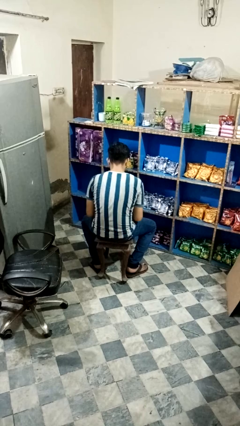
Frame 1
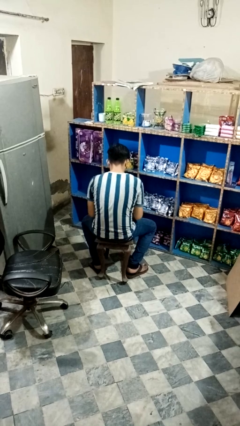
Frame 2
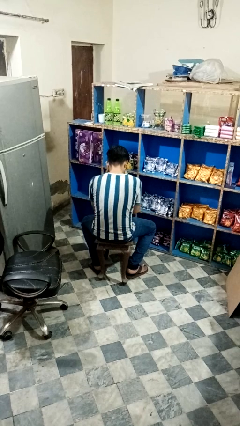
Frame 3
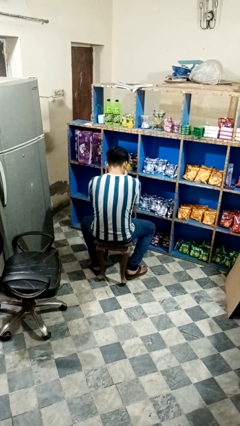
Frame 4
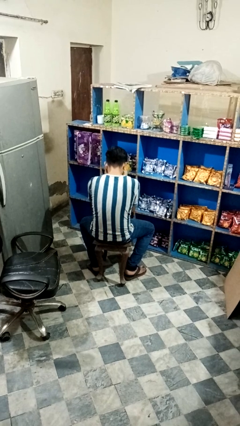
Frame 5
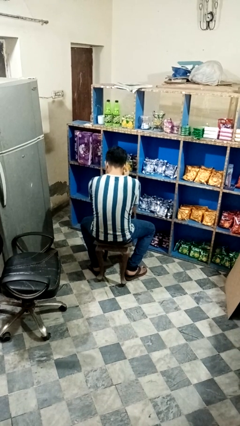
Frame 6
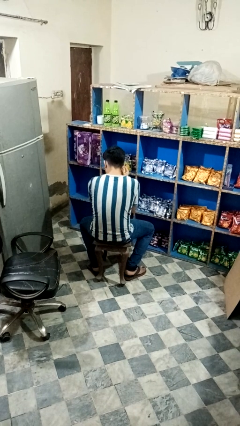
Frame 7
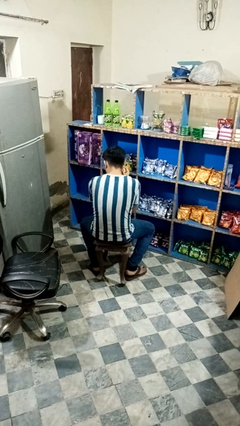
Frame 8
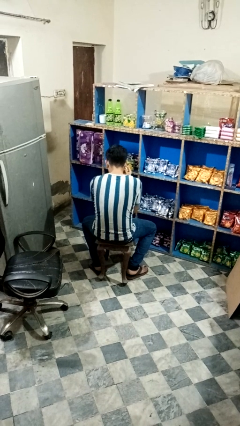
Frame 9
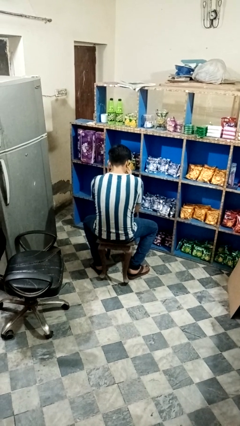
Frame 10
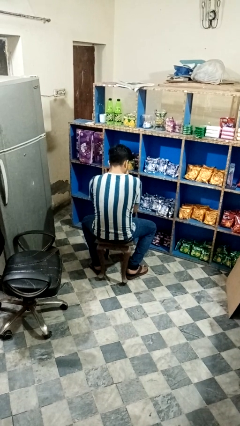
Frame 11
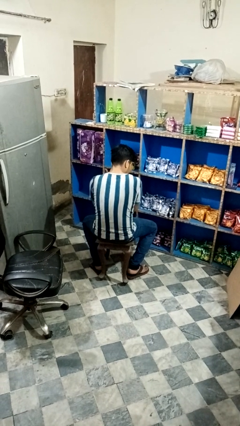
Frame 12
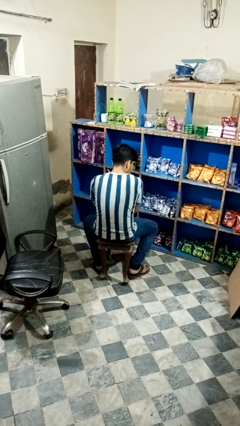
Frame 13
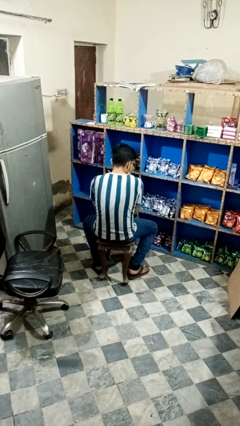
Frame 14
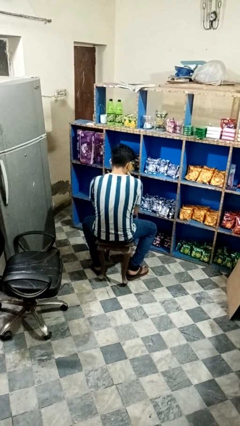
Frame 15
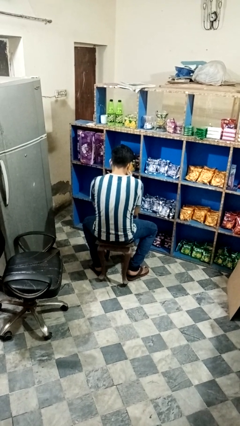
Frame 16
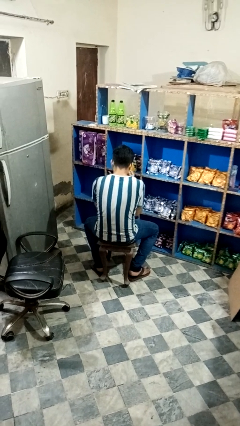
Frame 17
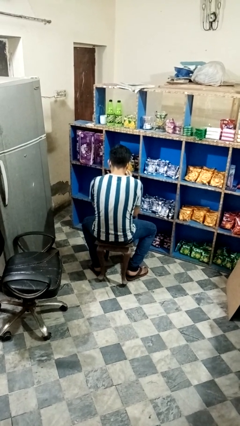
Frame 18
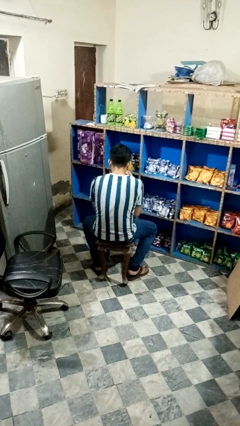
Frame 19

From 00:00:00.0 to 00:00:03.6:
person wipes mouth with napkin

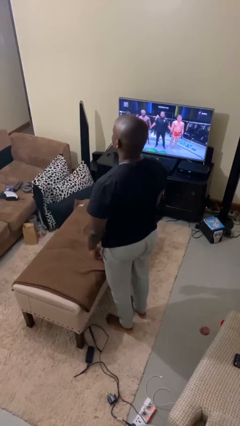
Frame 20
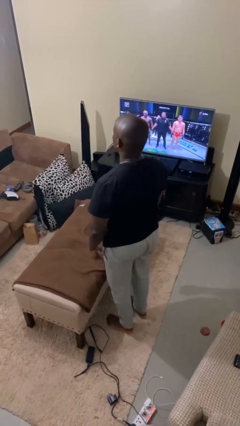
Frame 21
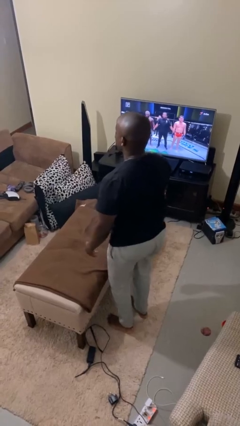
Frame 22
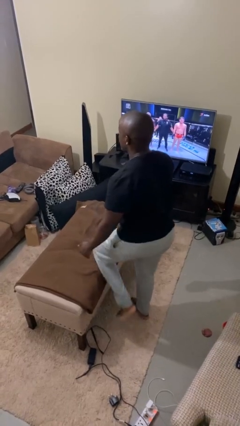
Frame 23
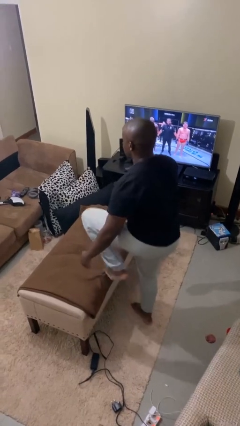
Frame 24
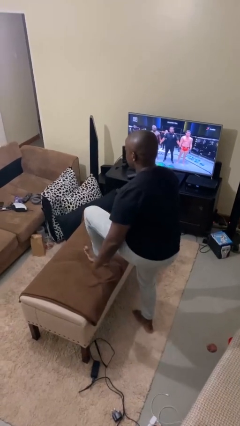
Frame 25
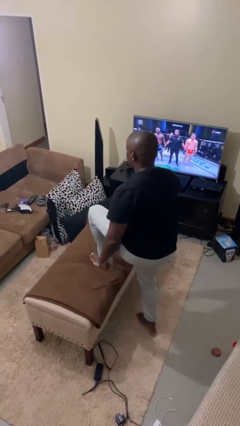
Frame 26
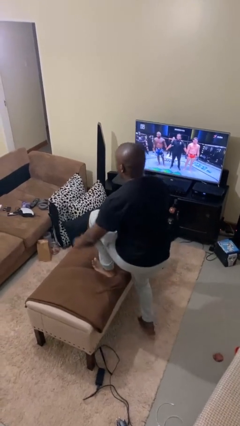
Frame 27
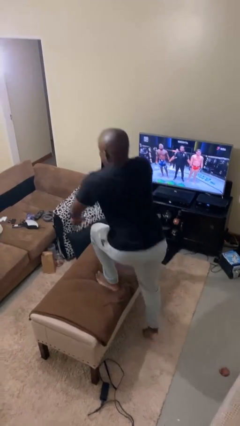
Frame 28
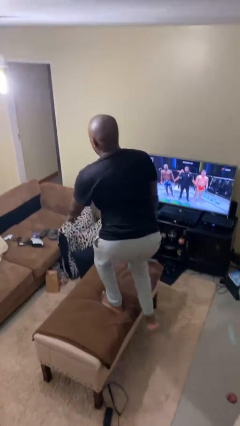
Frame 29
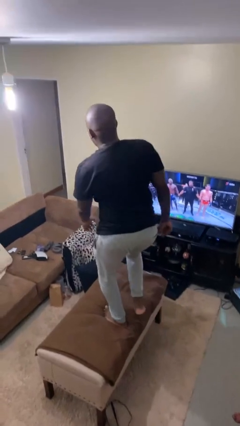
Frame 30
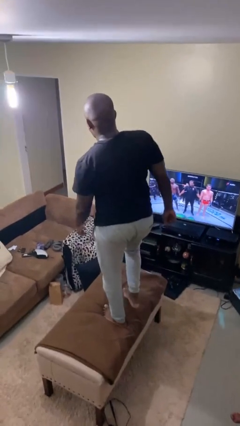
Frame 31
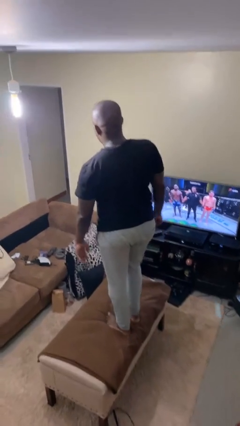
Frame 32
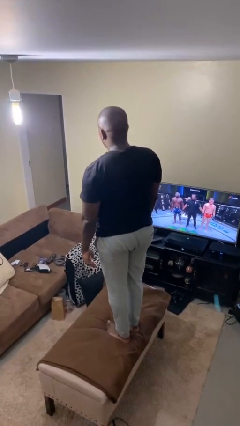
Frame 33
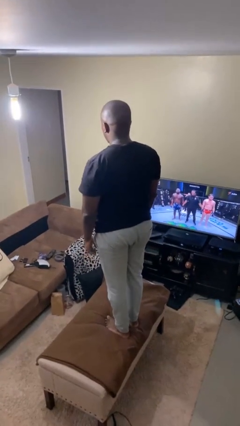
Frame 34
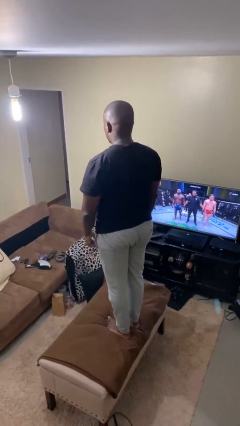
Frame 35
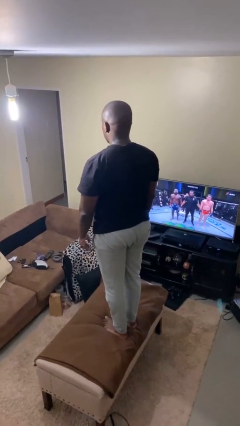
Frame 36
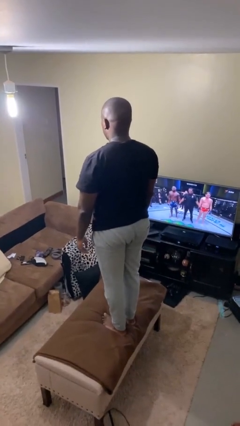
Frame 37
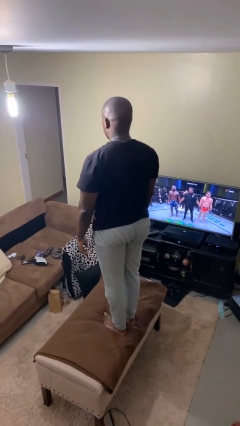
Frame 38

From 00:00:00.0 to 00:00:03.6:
person climbs on table

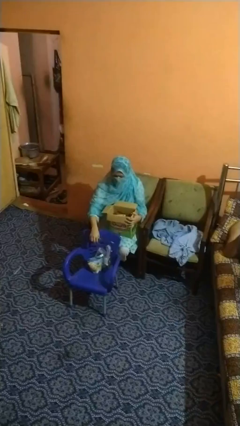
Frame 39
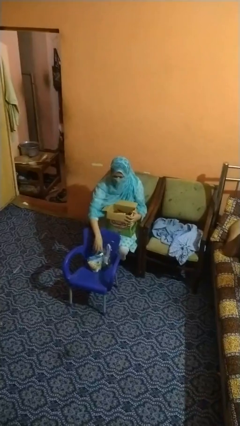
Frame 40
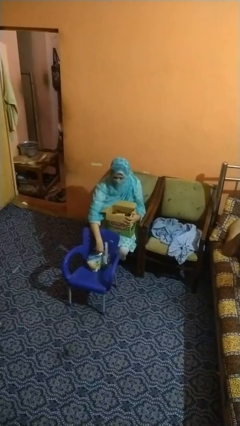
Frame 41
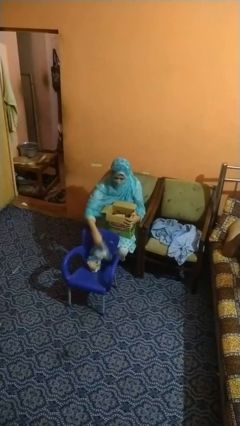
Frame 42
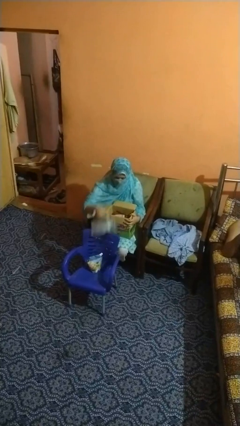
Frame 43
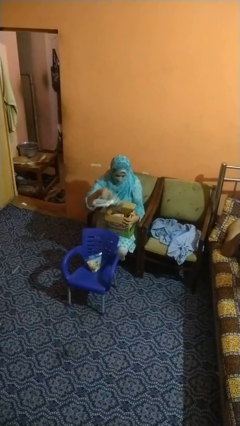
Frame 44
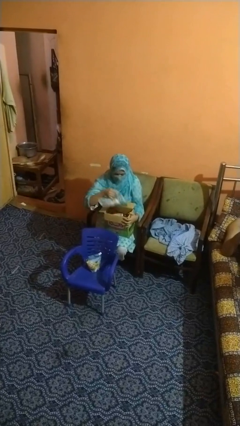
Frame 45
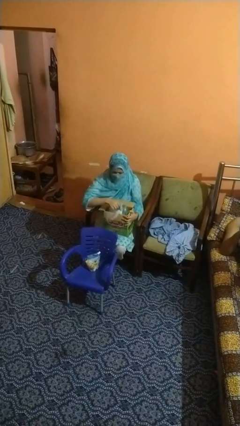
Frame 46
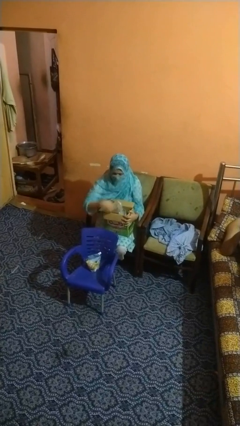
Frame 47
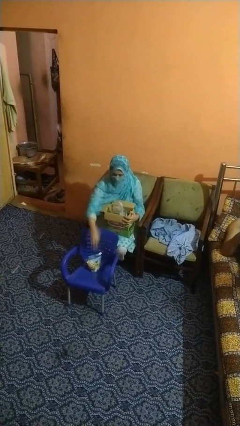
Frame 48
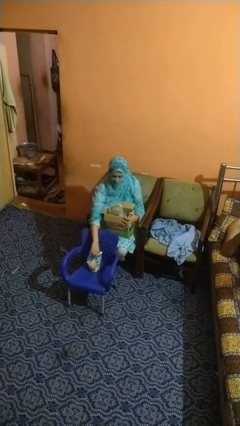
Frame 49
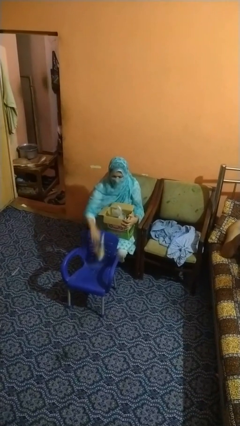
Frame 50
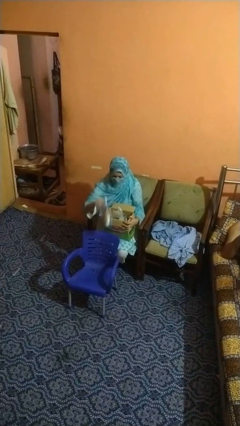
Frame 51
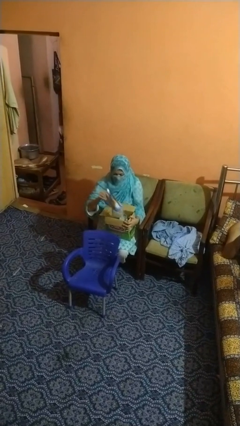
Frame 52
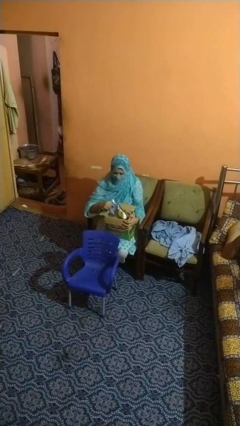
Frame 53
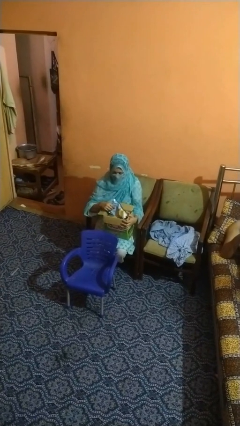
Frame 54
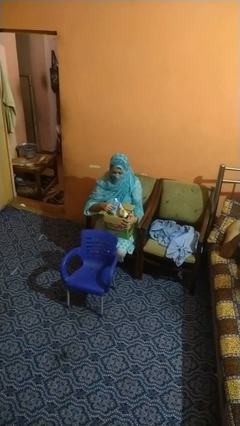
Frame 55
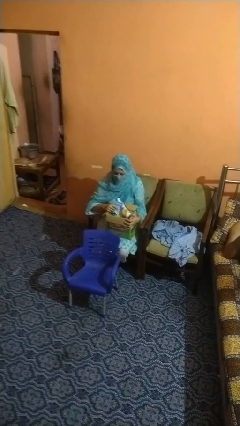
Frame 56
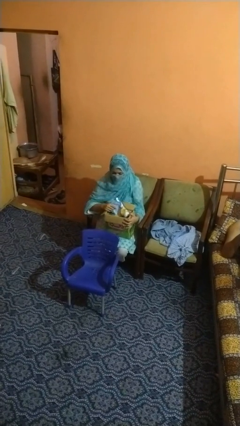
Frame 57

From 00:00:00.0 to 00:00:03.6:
person puts object into box

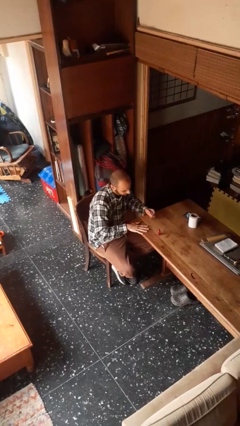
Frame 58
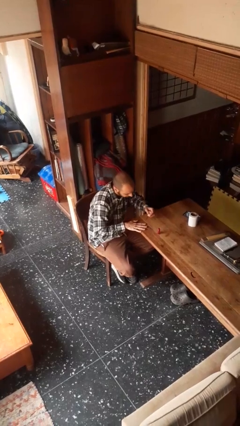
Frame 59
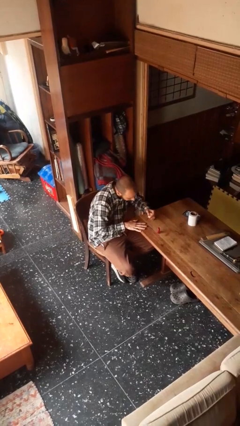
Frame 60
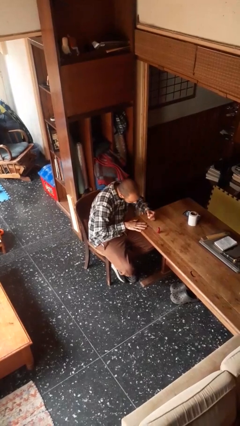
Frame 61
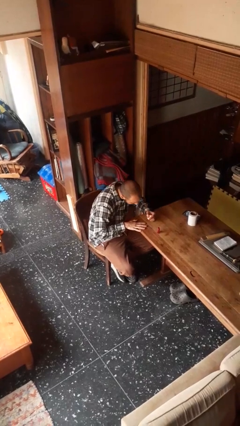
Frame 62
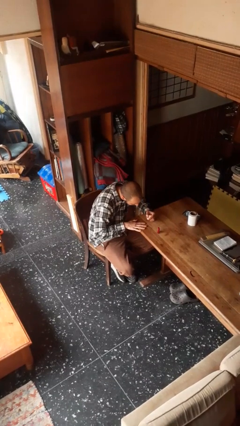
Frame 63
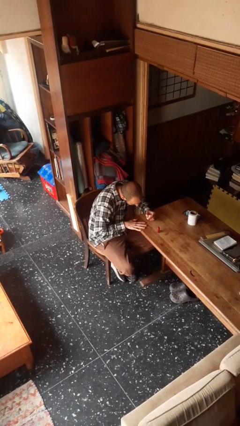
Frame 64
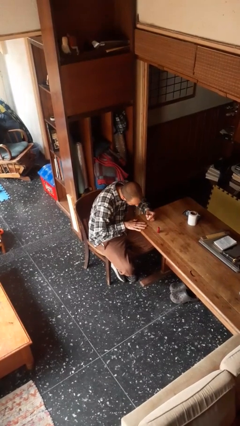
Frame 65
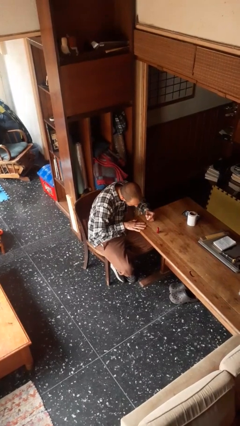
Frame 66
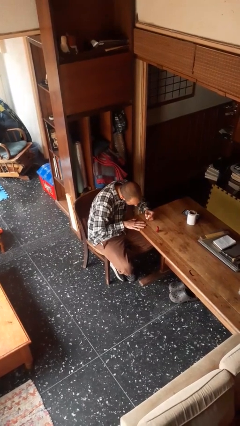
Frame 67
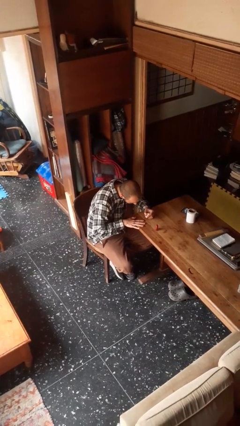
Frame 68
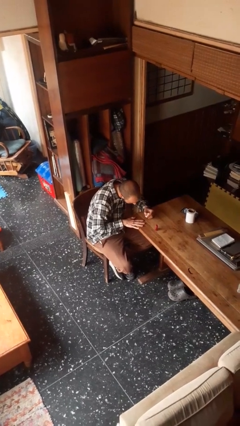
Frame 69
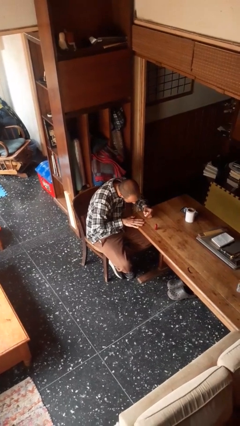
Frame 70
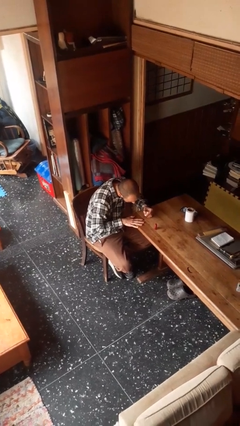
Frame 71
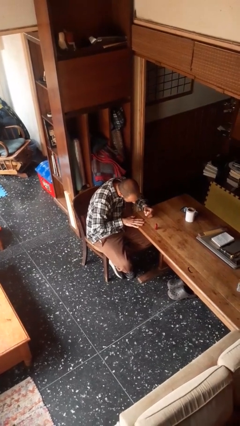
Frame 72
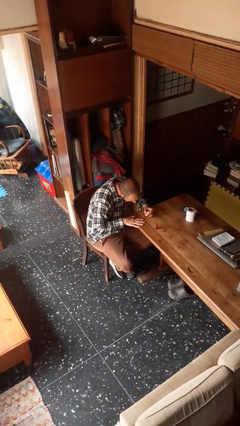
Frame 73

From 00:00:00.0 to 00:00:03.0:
person paints fingernails

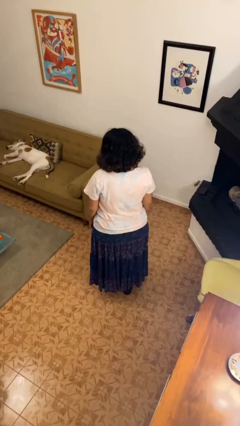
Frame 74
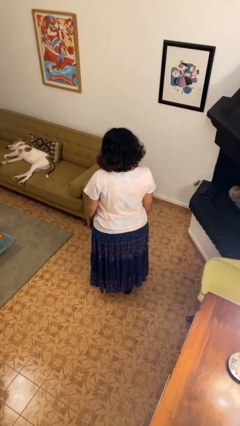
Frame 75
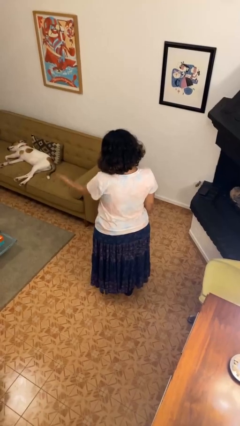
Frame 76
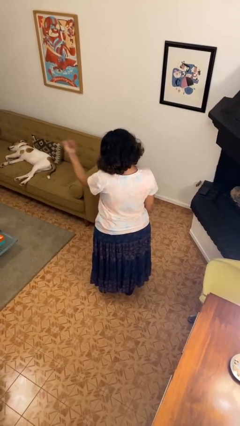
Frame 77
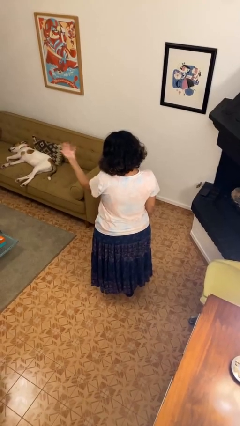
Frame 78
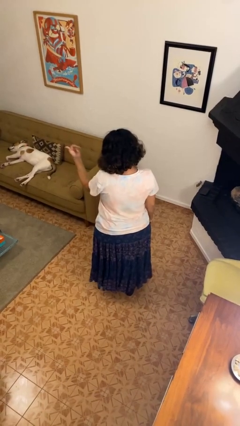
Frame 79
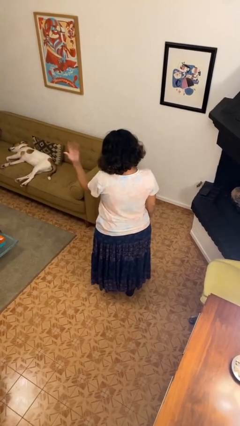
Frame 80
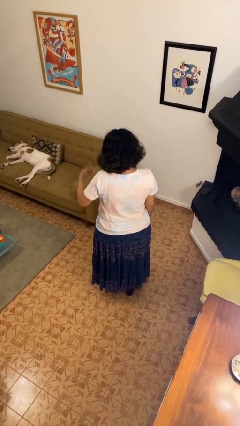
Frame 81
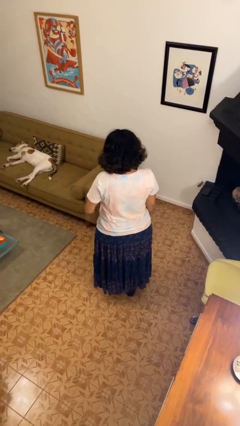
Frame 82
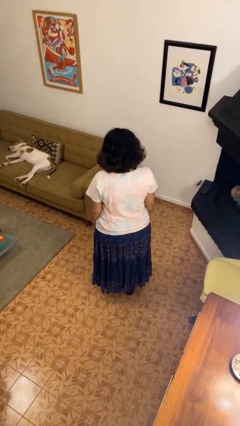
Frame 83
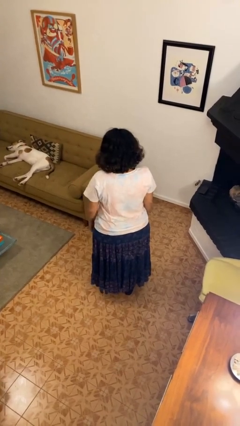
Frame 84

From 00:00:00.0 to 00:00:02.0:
person gestures come here

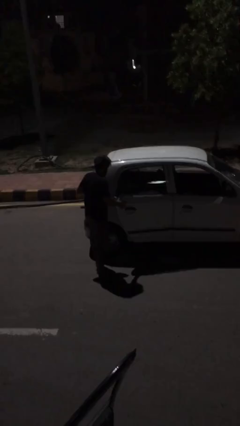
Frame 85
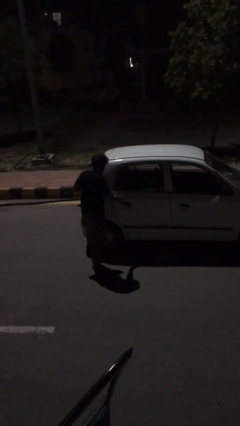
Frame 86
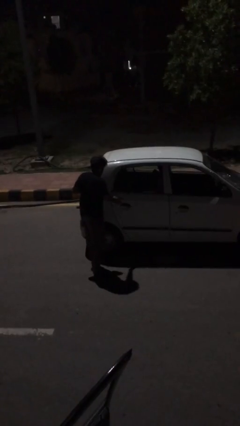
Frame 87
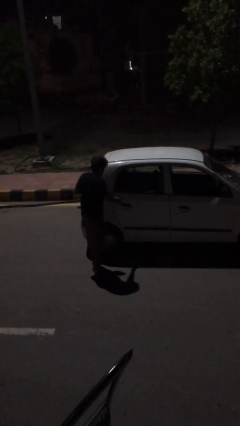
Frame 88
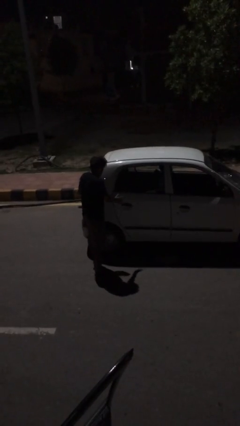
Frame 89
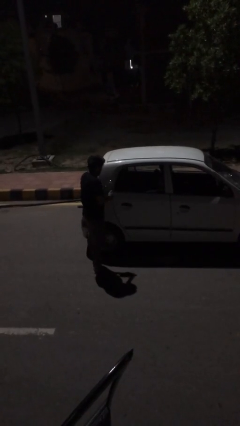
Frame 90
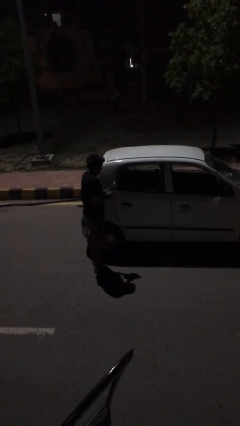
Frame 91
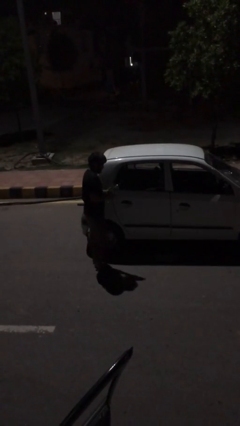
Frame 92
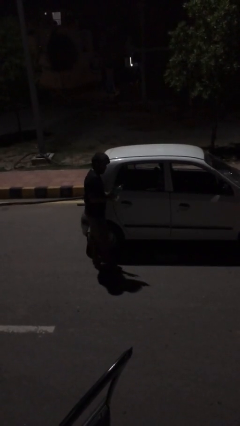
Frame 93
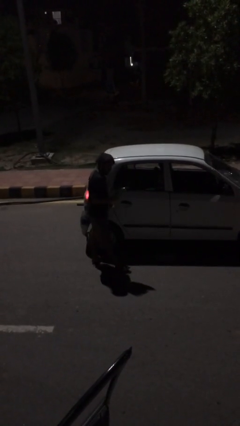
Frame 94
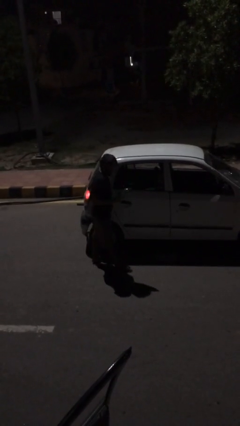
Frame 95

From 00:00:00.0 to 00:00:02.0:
person closes car door
